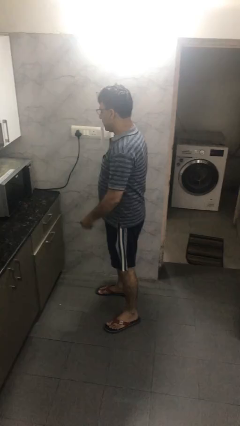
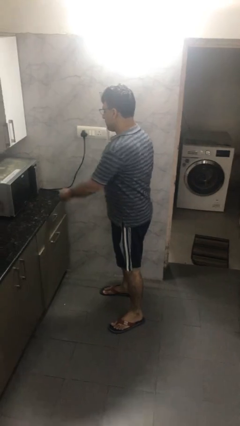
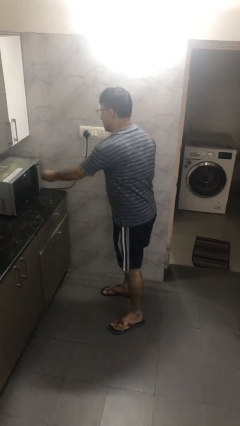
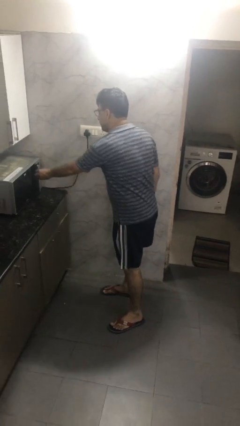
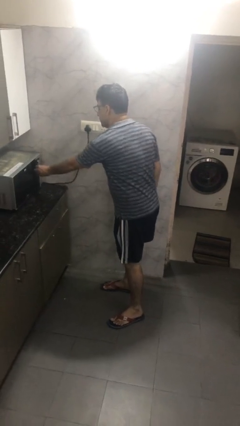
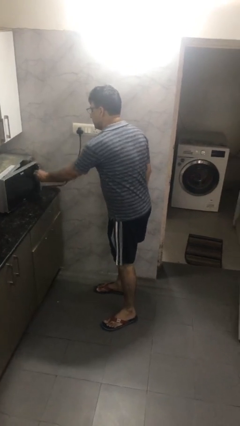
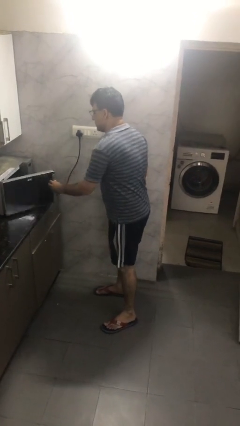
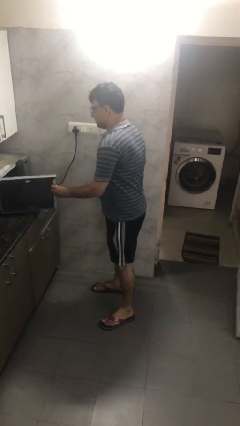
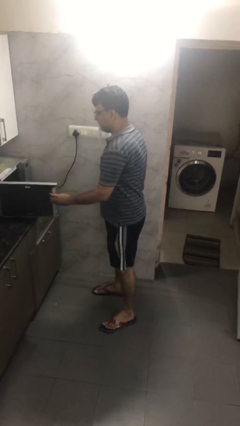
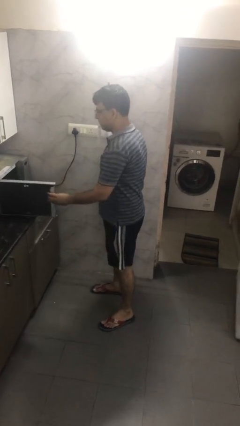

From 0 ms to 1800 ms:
person opens microwave

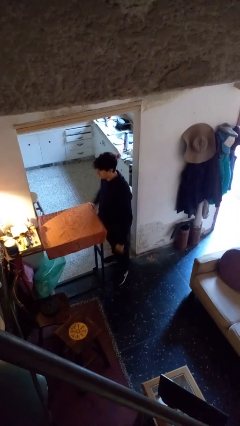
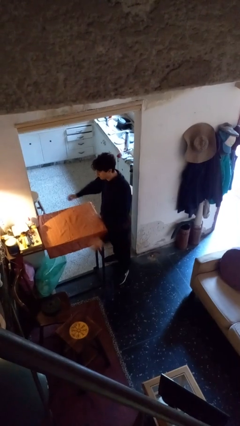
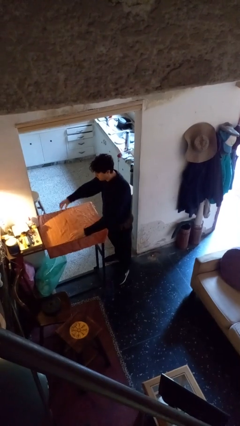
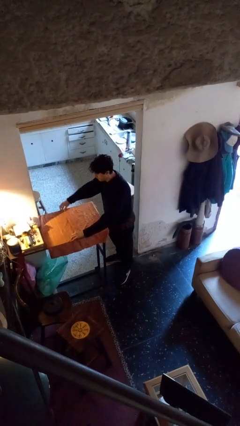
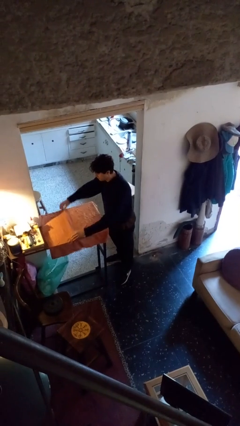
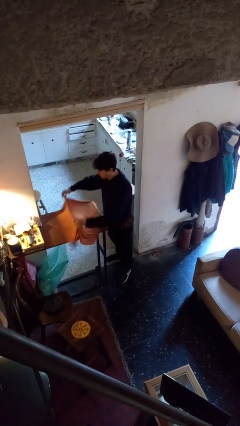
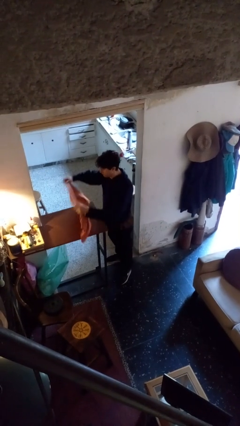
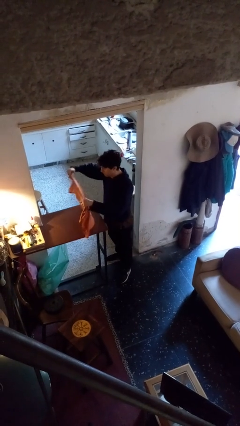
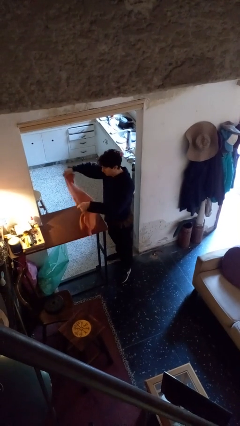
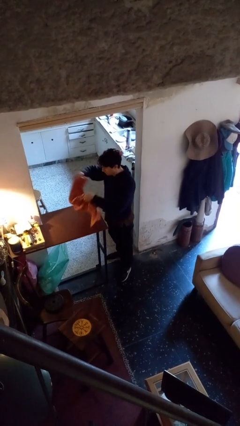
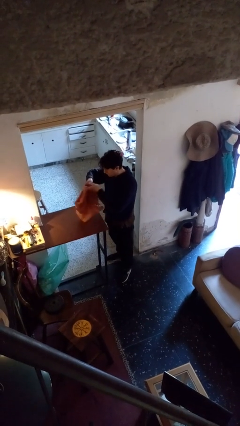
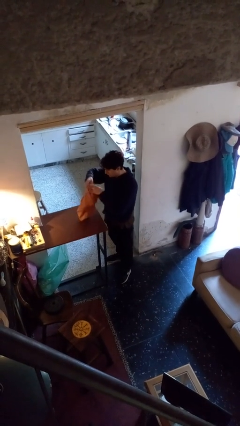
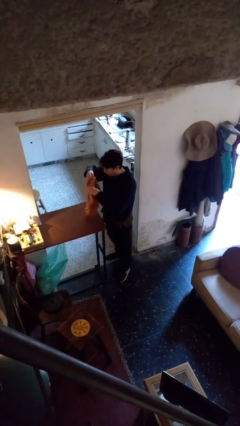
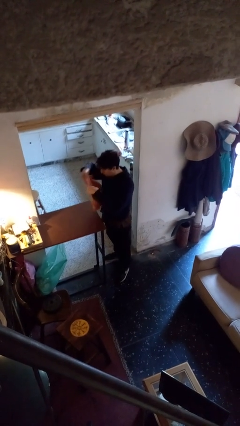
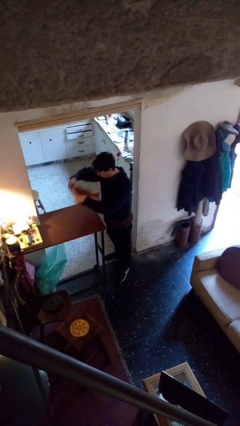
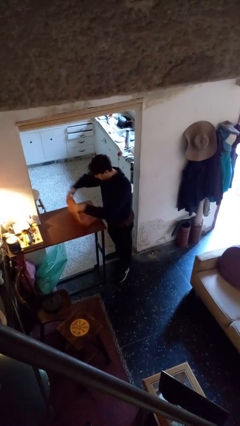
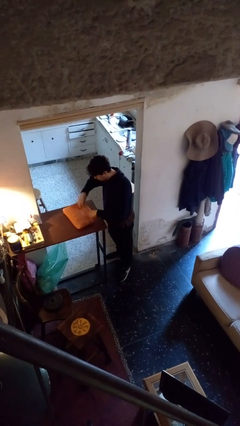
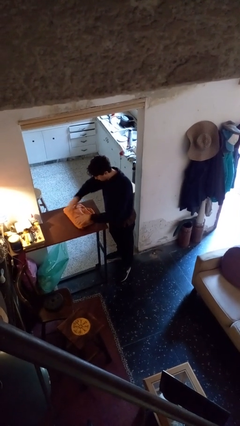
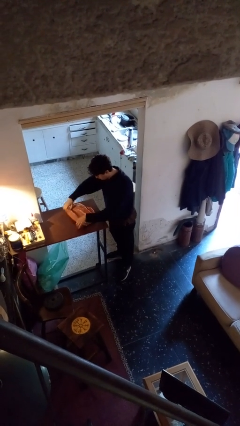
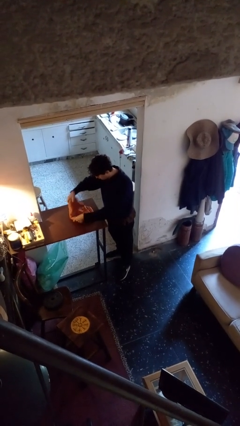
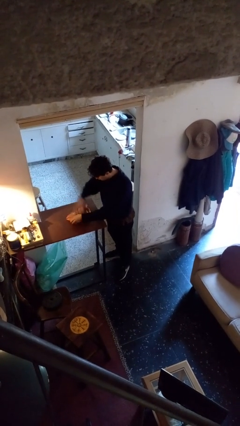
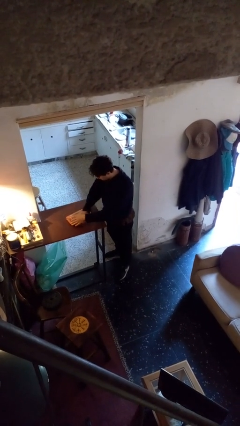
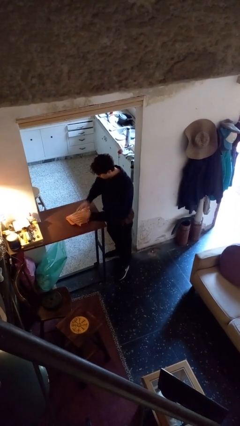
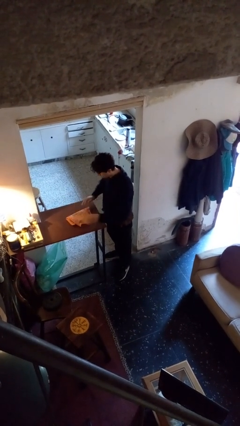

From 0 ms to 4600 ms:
person folds tablecloth

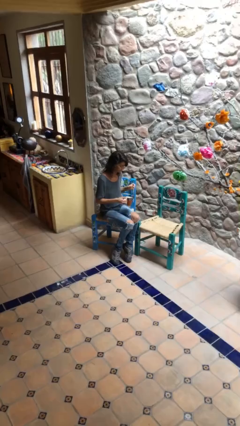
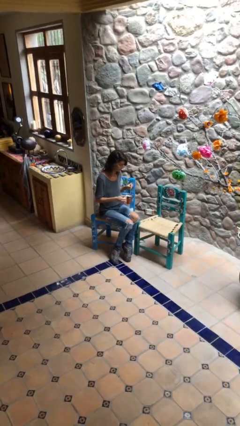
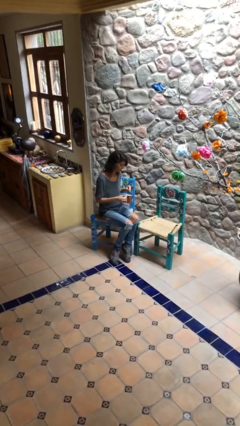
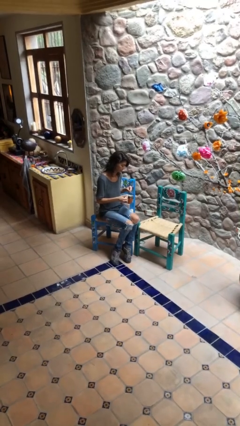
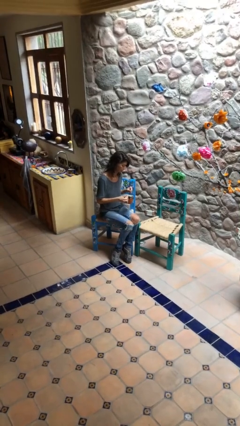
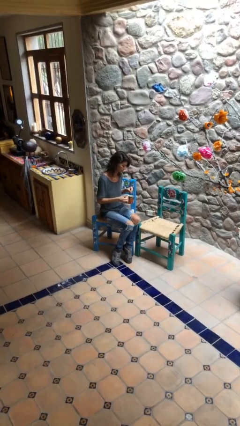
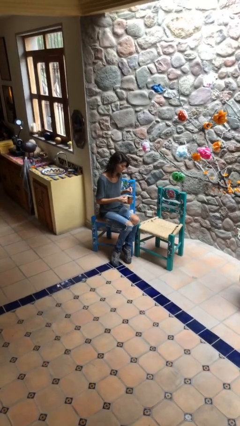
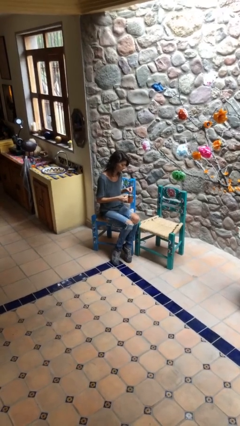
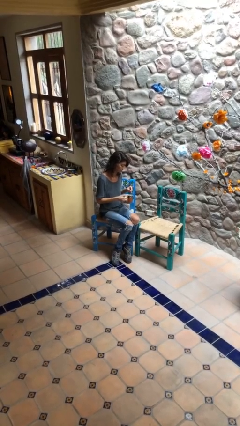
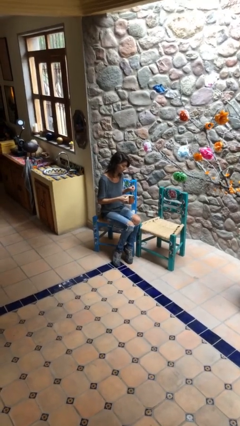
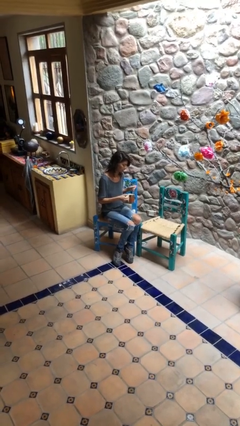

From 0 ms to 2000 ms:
person stirs mug

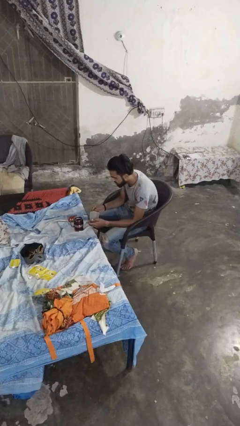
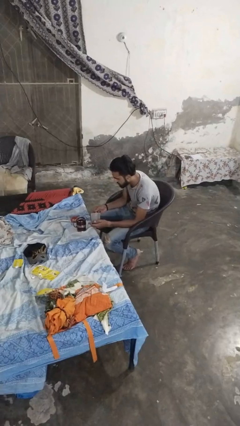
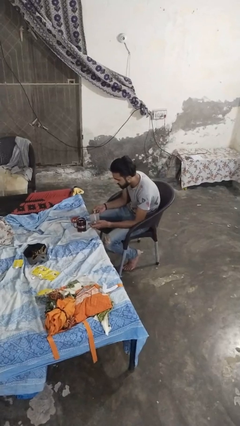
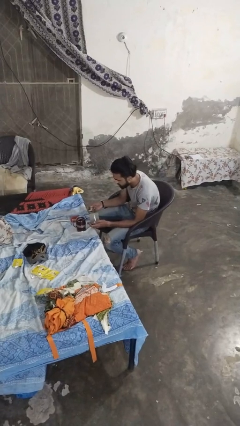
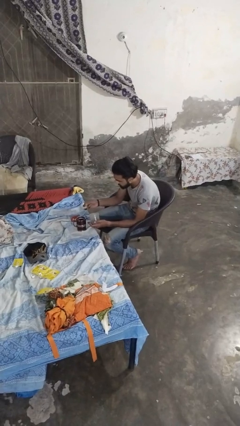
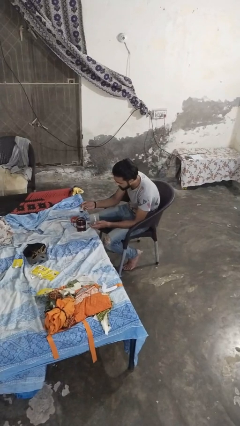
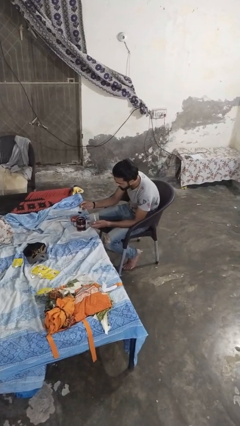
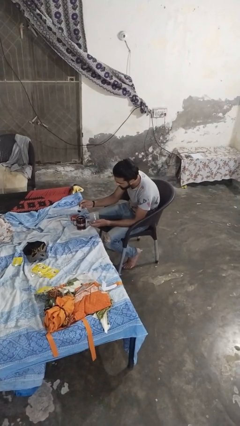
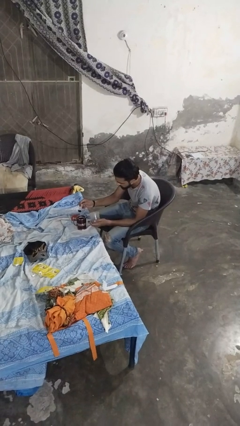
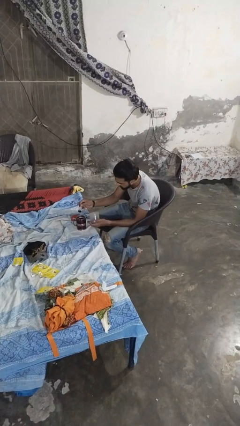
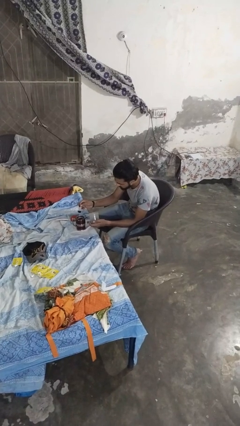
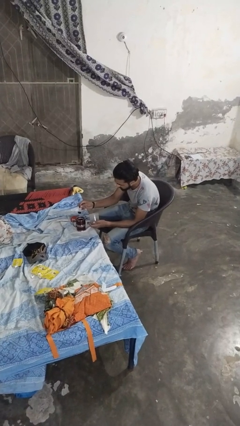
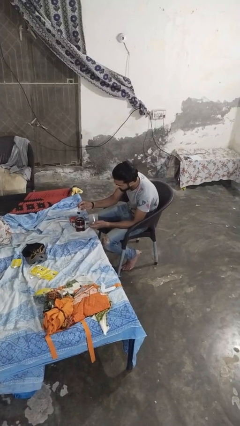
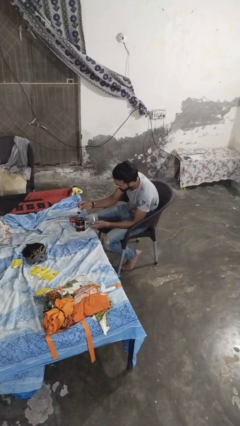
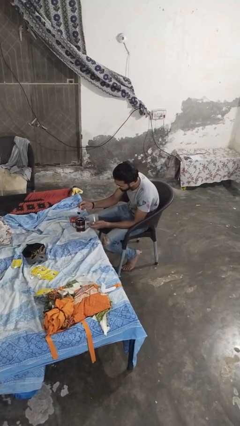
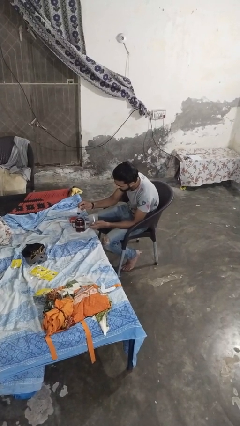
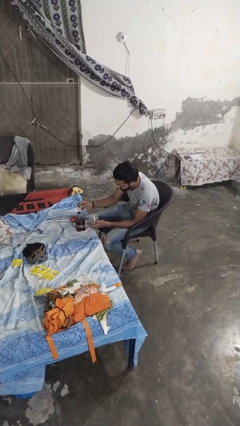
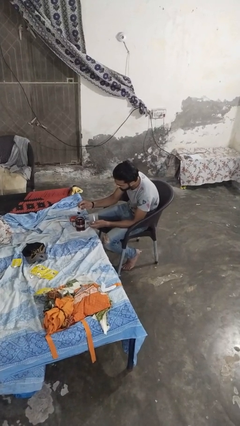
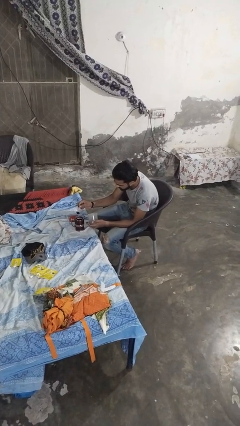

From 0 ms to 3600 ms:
person pours coffee into mug

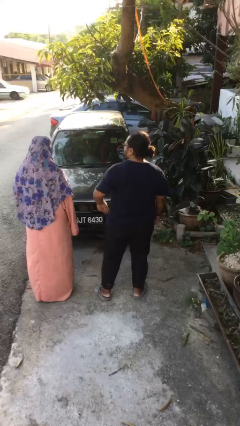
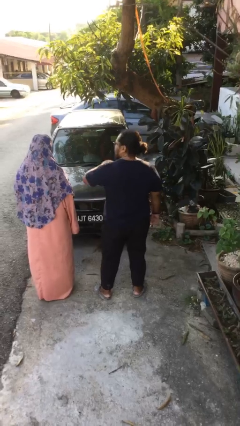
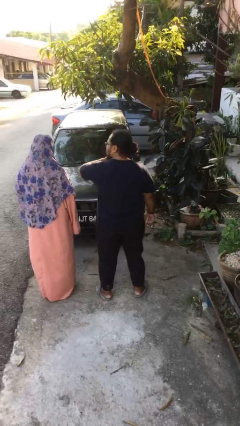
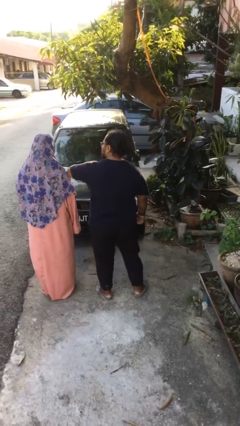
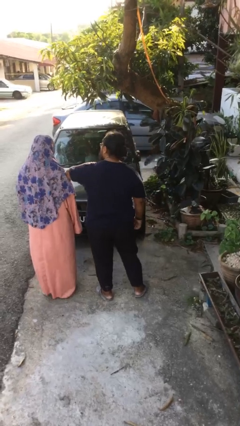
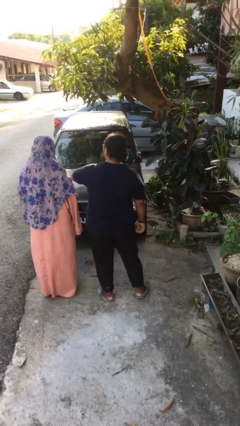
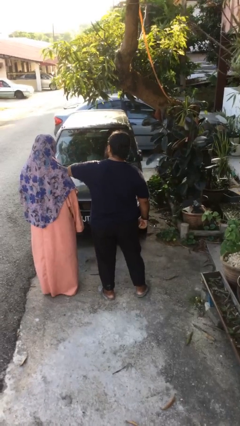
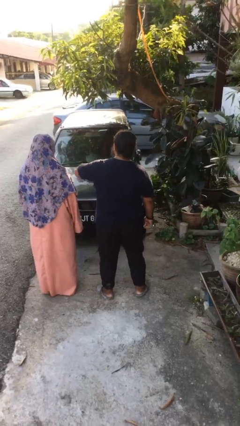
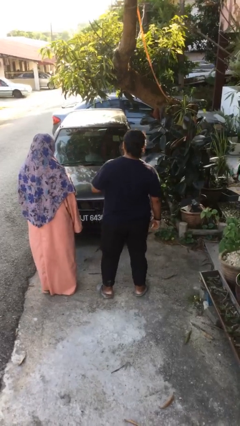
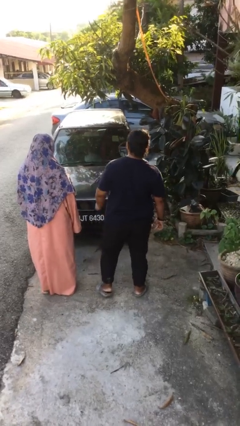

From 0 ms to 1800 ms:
person nudges person with elbow

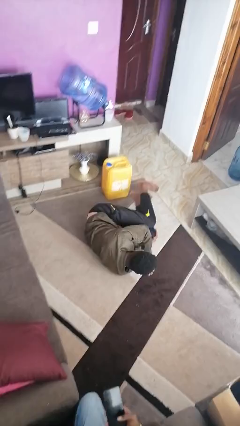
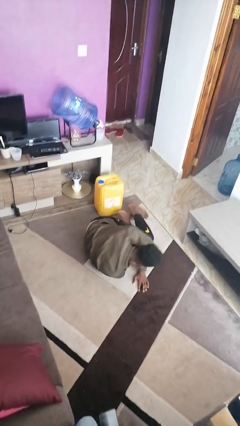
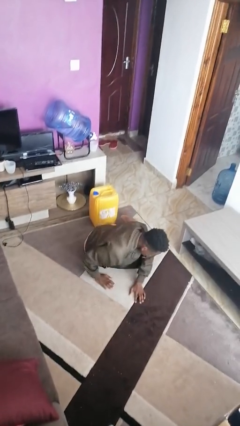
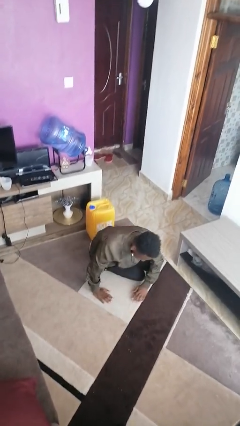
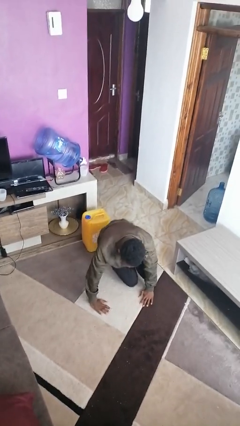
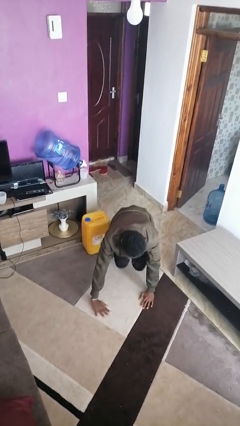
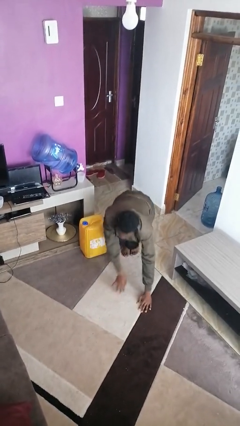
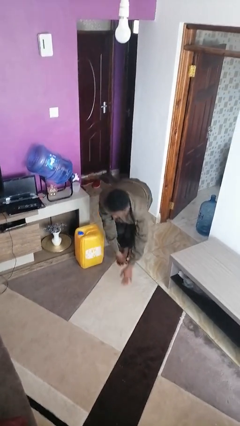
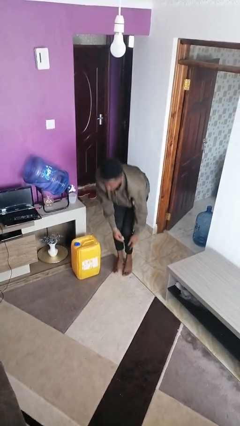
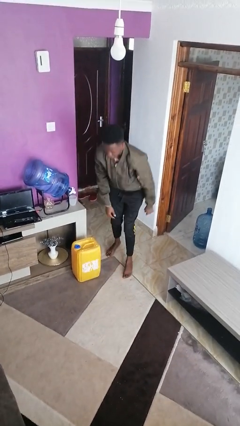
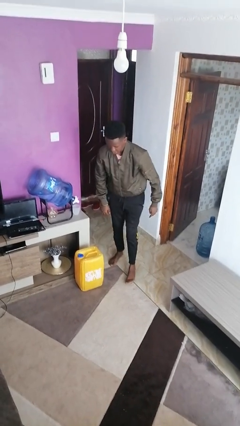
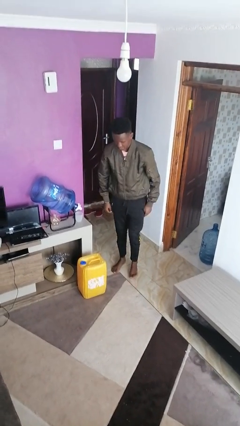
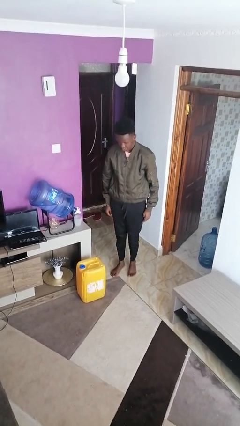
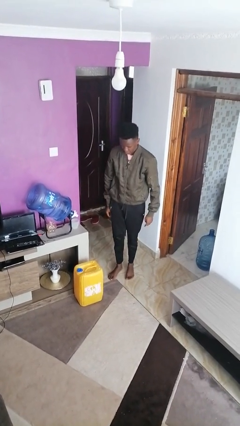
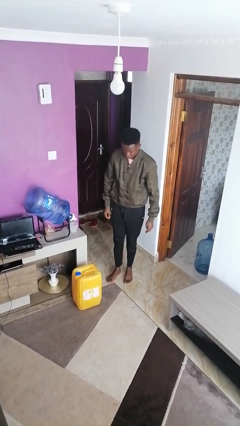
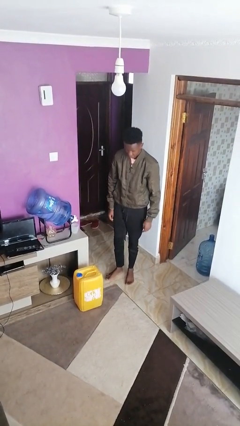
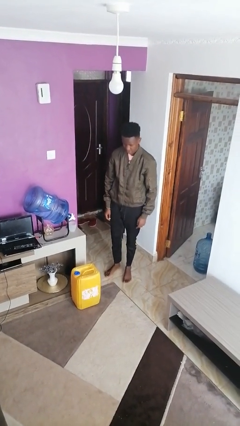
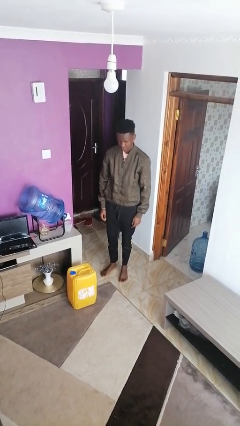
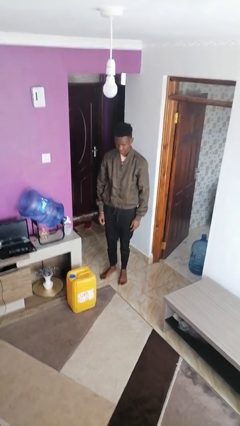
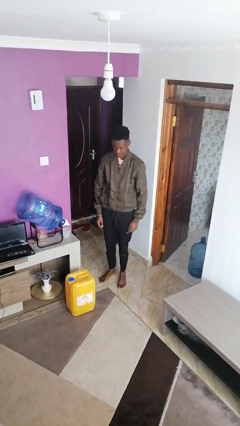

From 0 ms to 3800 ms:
person stands up from floor
